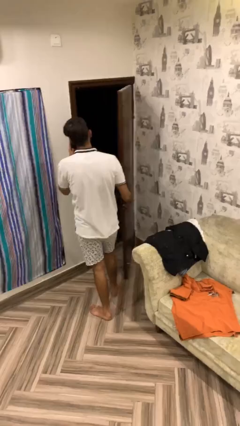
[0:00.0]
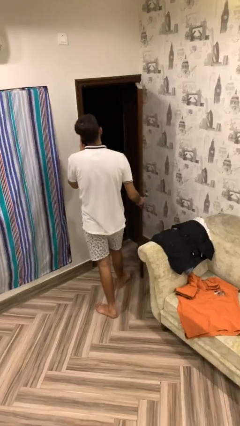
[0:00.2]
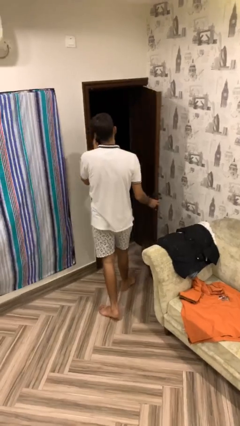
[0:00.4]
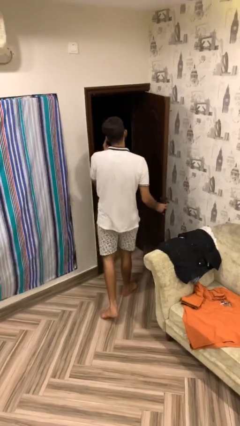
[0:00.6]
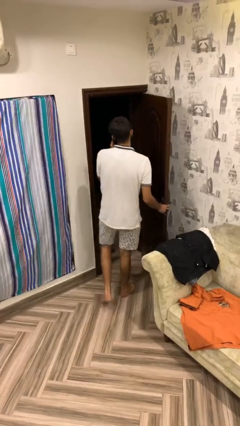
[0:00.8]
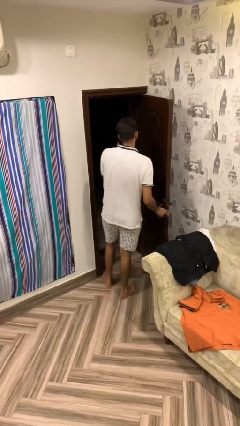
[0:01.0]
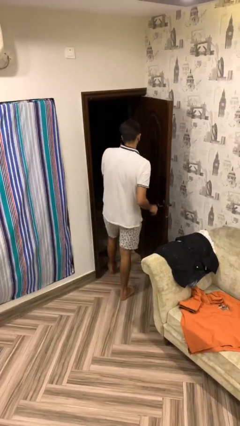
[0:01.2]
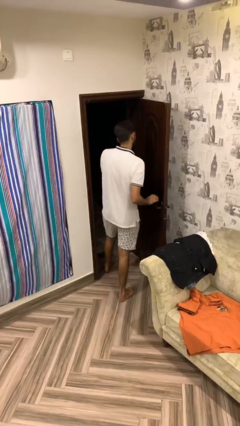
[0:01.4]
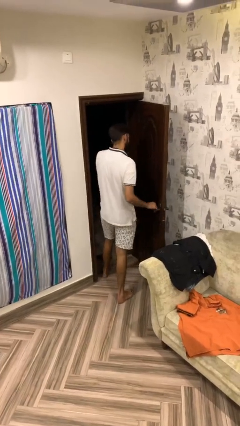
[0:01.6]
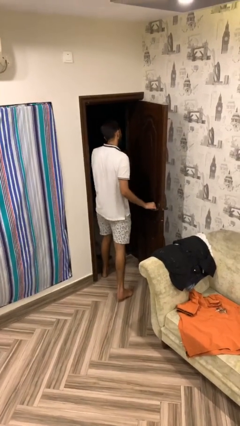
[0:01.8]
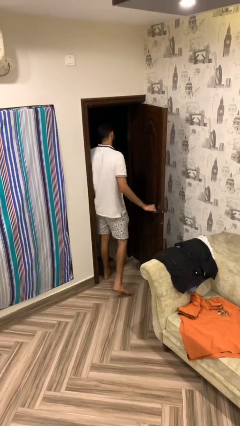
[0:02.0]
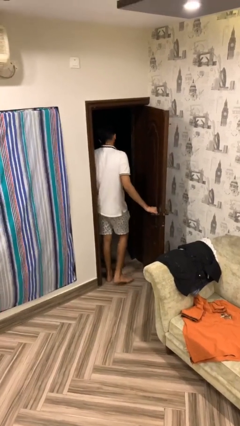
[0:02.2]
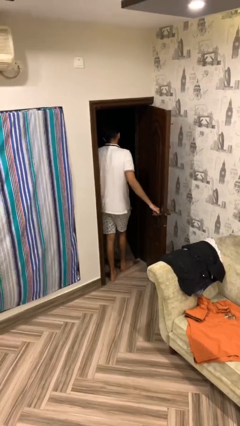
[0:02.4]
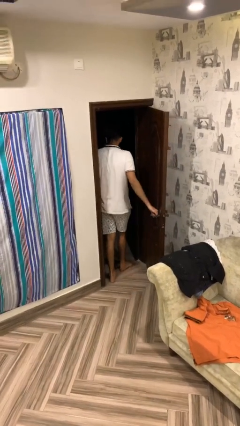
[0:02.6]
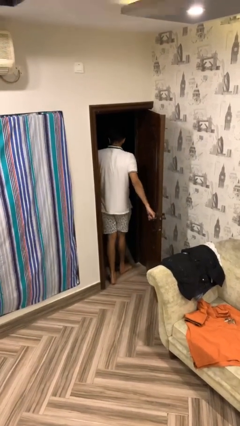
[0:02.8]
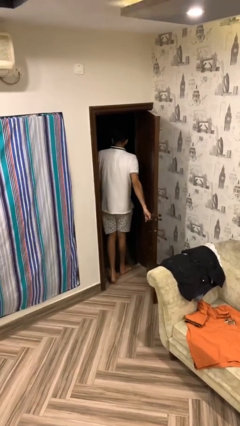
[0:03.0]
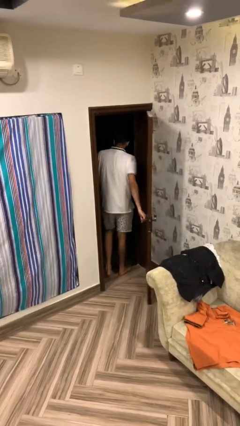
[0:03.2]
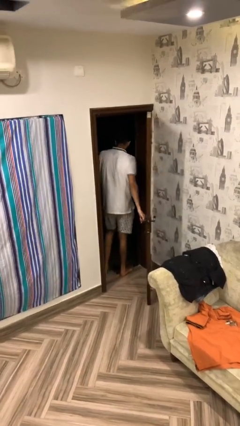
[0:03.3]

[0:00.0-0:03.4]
person exits scene through structure

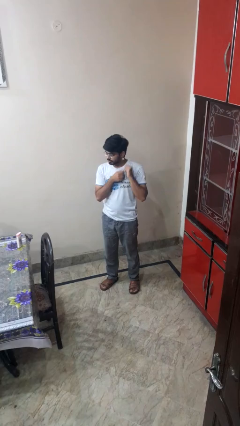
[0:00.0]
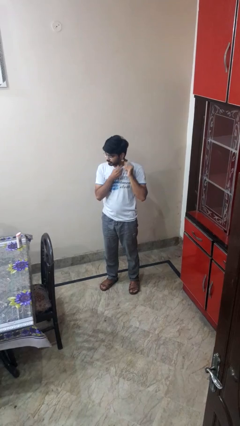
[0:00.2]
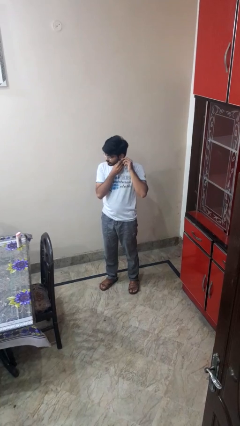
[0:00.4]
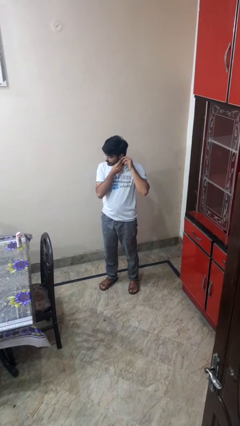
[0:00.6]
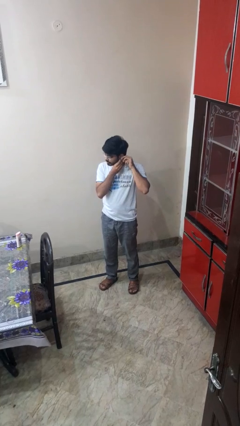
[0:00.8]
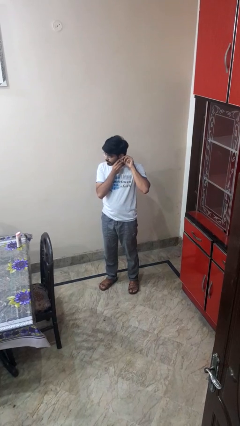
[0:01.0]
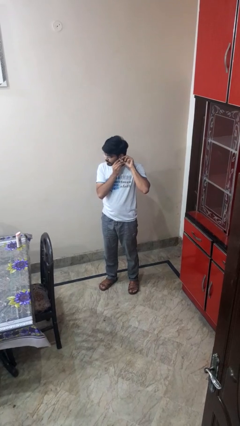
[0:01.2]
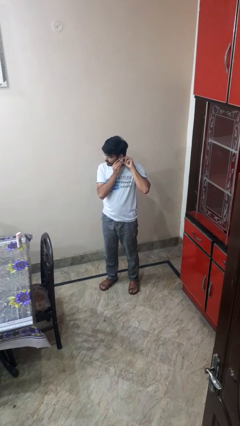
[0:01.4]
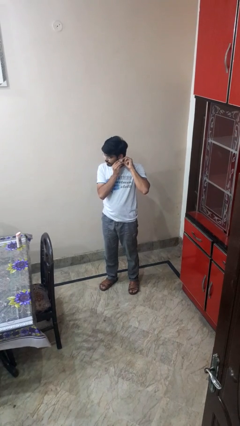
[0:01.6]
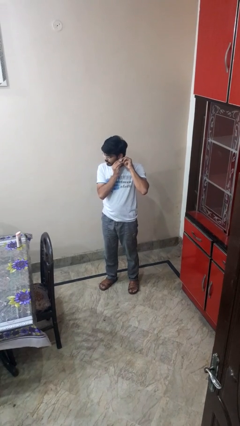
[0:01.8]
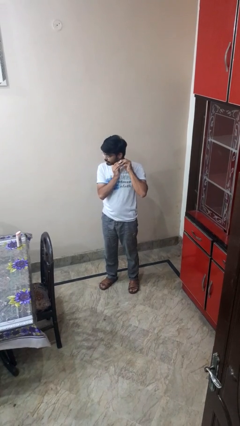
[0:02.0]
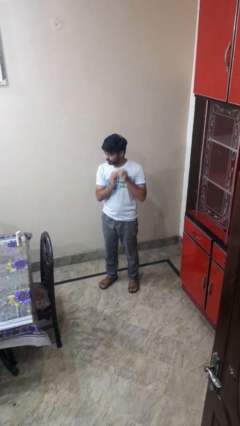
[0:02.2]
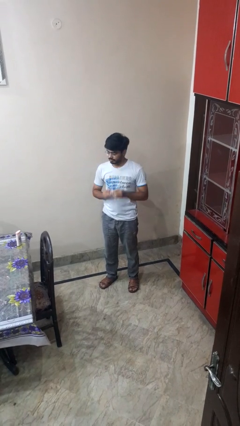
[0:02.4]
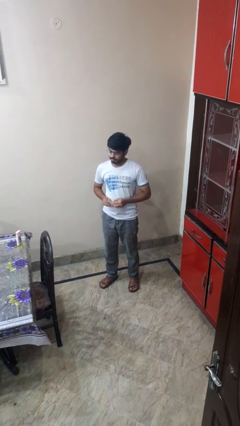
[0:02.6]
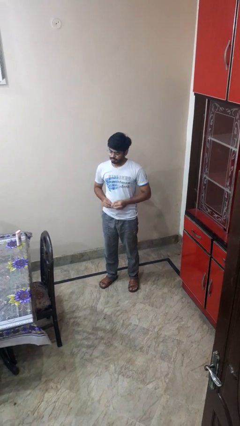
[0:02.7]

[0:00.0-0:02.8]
person takes off earrings

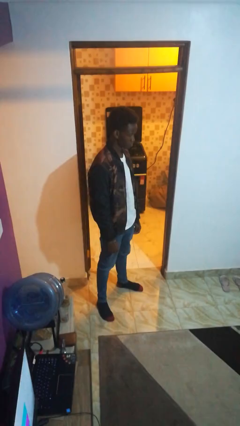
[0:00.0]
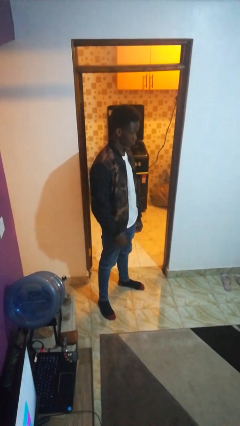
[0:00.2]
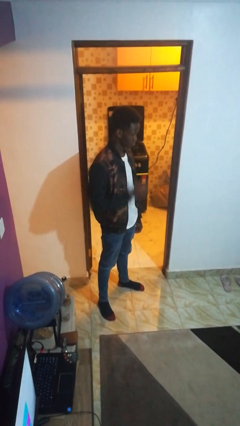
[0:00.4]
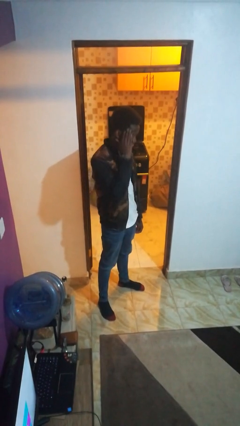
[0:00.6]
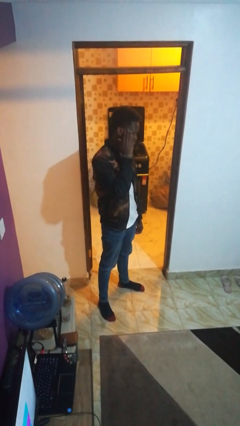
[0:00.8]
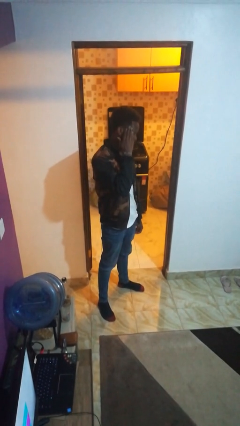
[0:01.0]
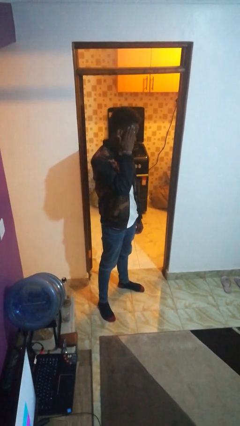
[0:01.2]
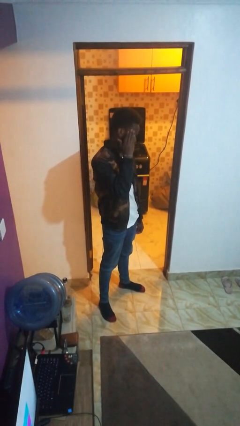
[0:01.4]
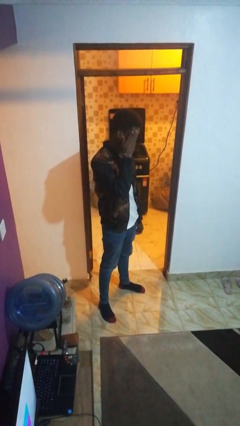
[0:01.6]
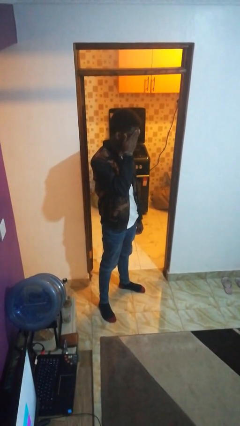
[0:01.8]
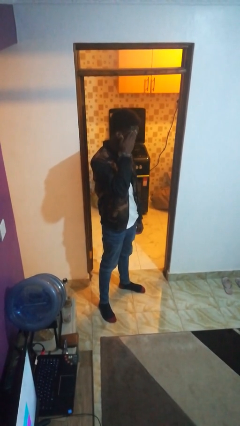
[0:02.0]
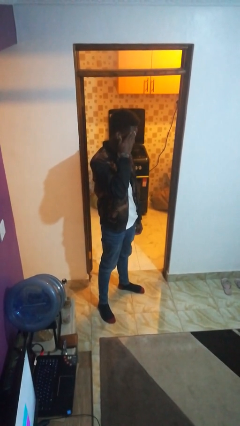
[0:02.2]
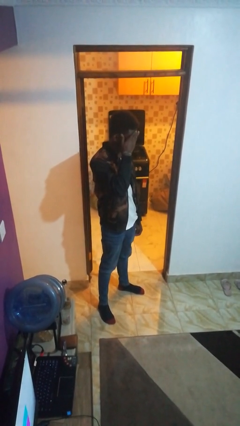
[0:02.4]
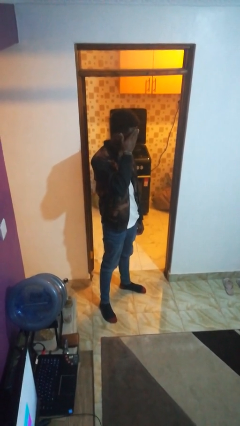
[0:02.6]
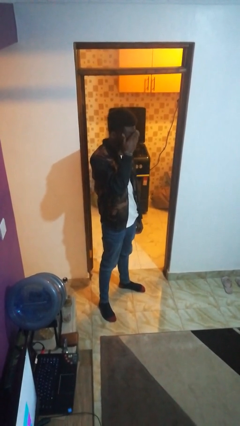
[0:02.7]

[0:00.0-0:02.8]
person scratches face

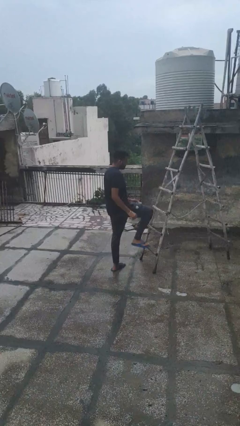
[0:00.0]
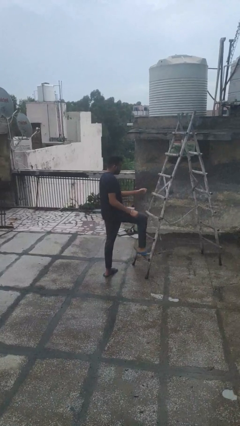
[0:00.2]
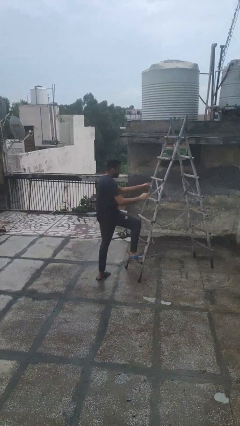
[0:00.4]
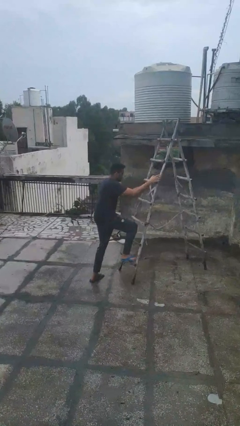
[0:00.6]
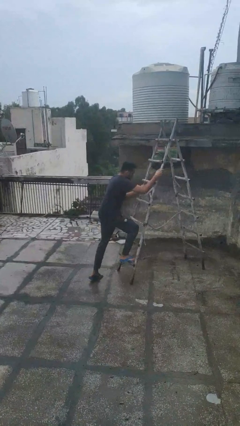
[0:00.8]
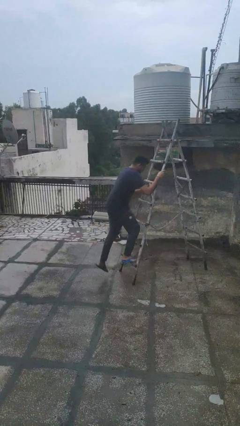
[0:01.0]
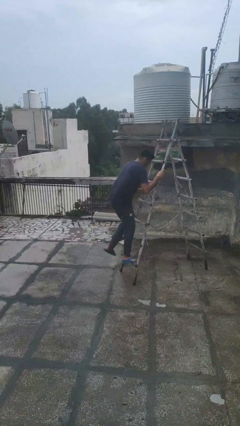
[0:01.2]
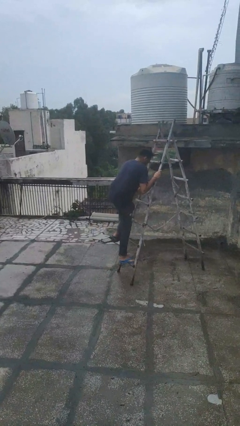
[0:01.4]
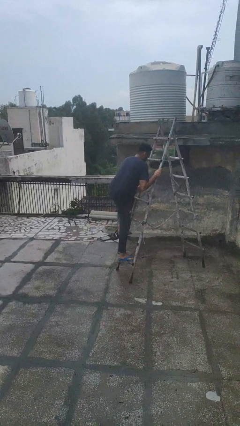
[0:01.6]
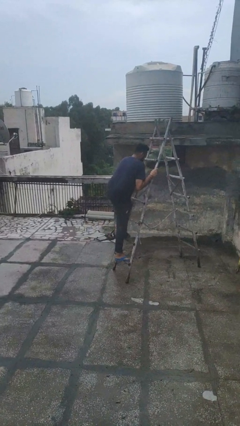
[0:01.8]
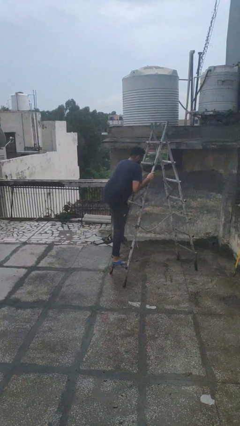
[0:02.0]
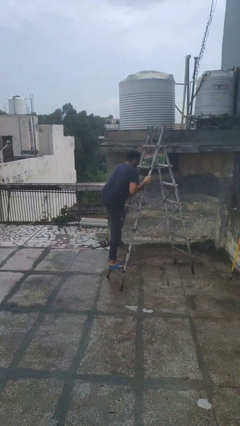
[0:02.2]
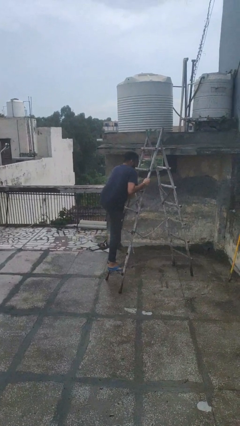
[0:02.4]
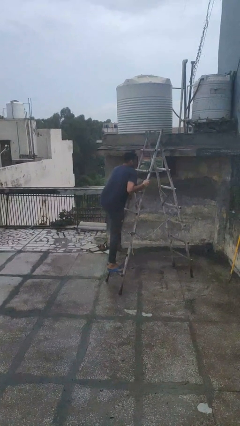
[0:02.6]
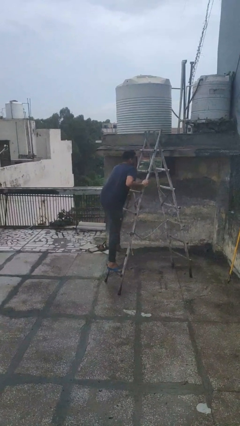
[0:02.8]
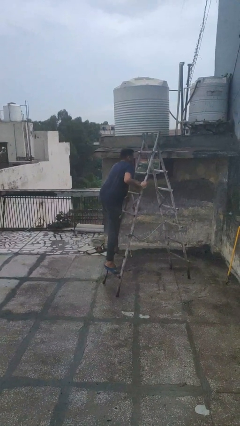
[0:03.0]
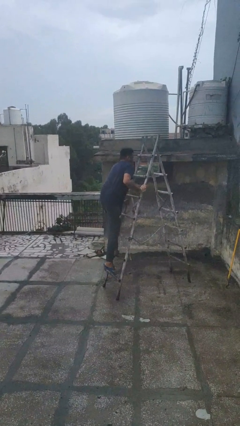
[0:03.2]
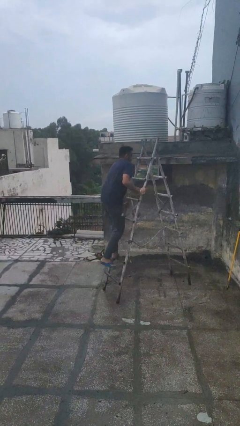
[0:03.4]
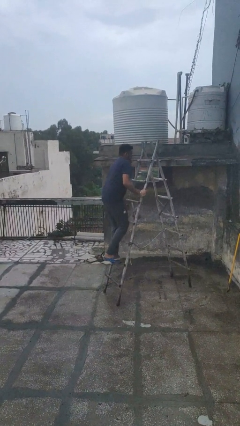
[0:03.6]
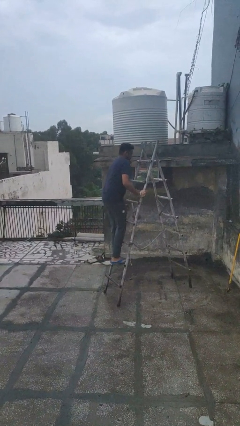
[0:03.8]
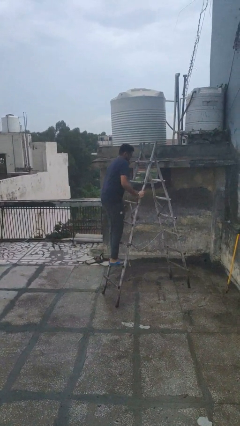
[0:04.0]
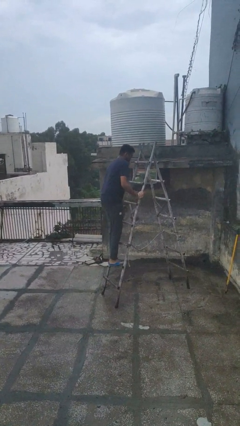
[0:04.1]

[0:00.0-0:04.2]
person climbs up ladder

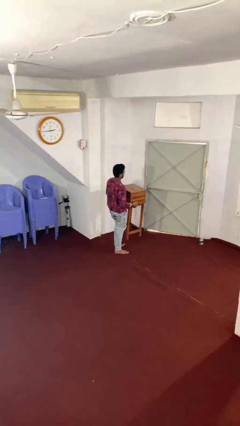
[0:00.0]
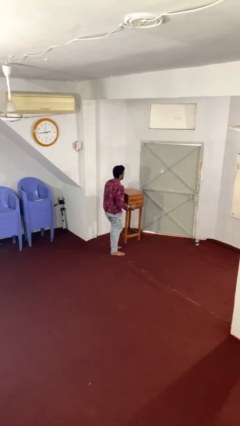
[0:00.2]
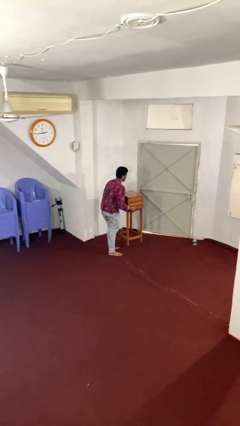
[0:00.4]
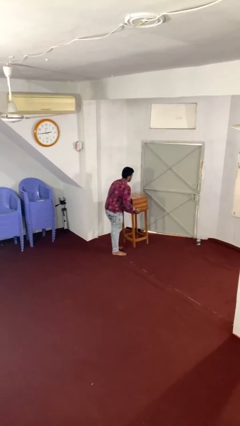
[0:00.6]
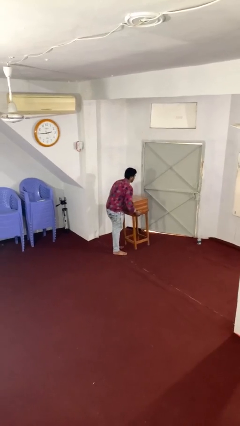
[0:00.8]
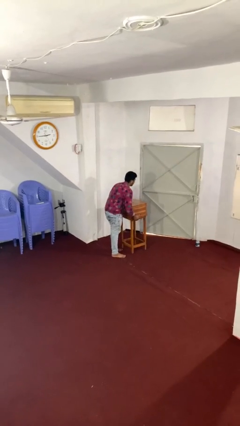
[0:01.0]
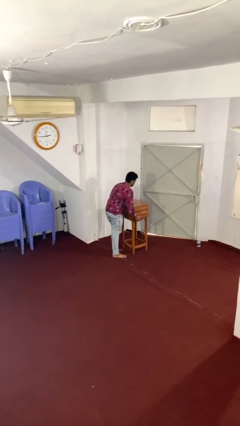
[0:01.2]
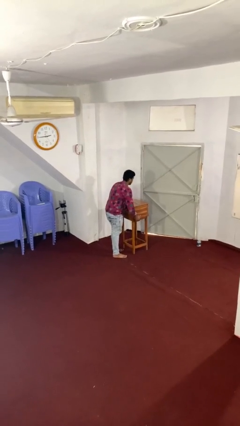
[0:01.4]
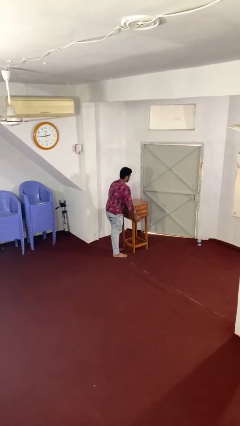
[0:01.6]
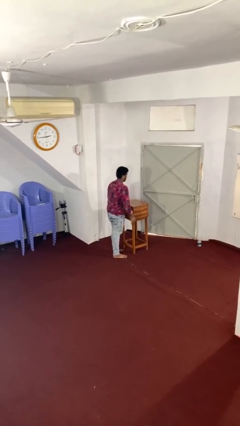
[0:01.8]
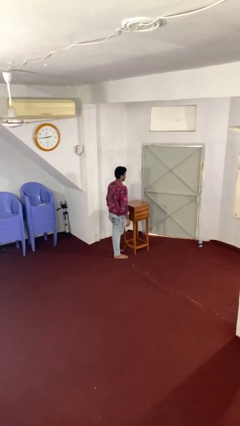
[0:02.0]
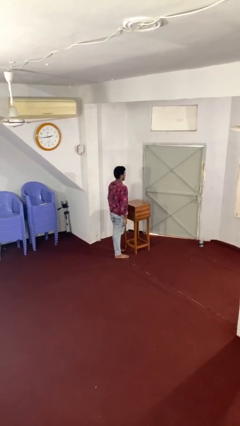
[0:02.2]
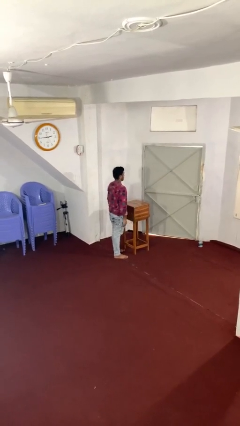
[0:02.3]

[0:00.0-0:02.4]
person puts down object on floor

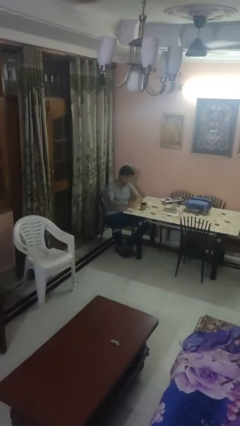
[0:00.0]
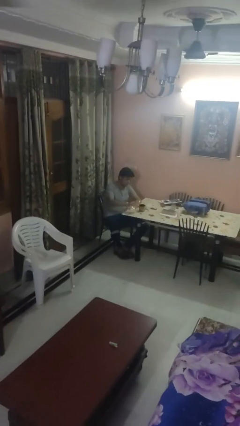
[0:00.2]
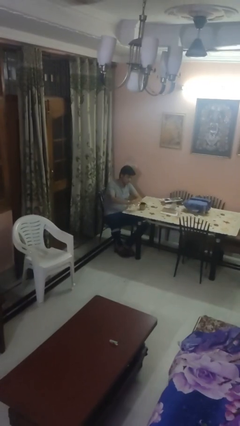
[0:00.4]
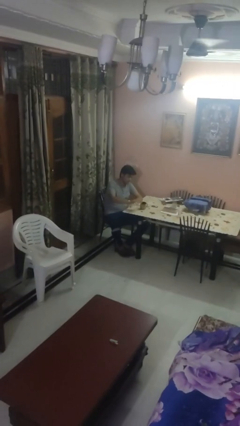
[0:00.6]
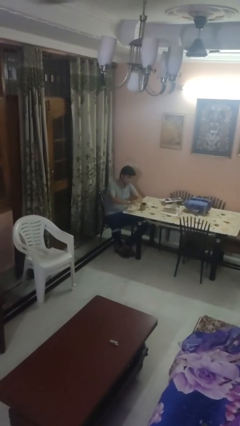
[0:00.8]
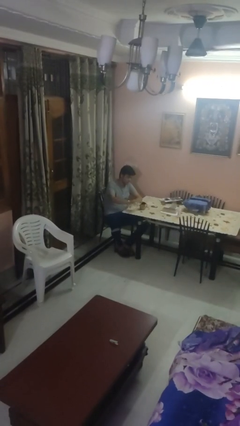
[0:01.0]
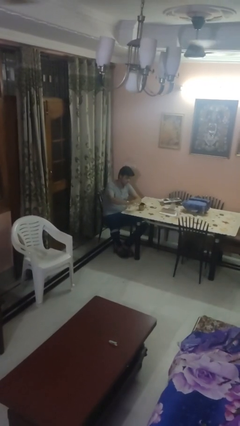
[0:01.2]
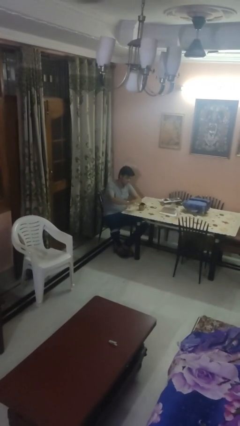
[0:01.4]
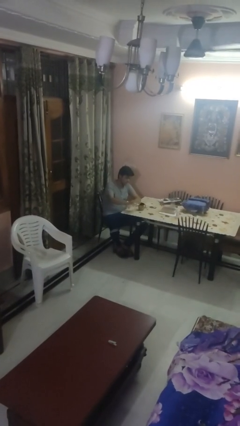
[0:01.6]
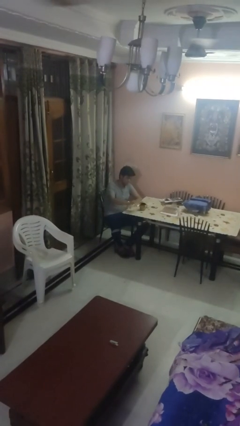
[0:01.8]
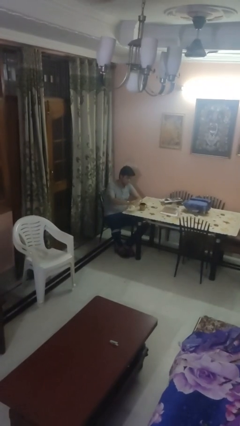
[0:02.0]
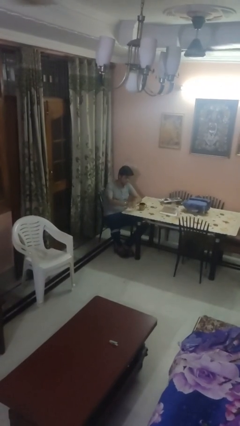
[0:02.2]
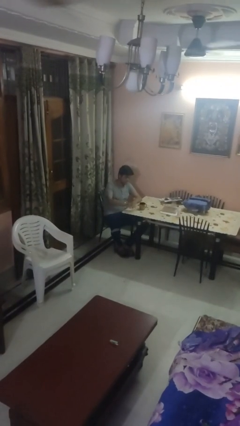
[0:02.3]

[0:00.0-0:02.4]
person pours liquid into cup
